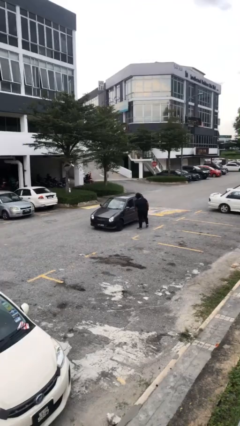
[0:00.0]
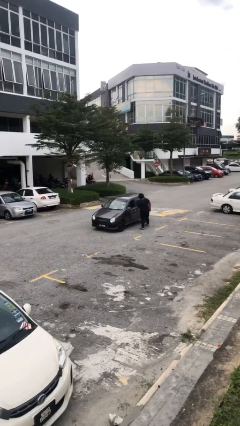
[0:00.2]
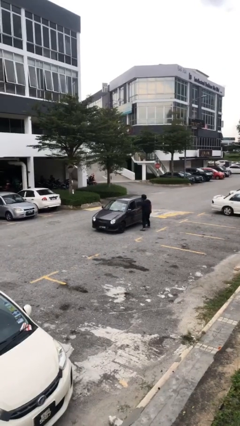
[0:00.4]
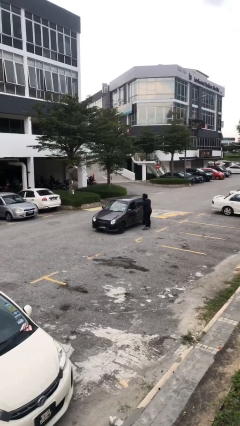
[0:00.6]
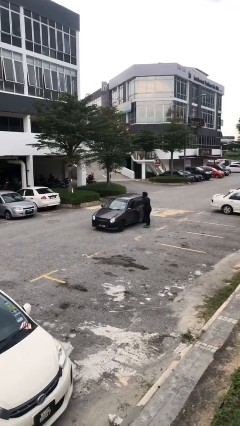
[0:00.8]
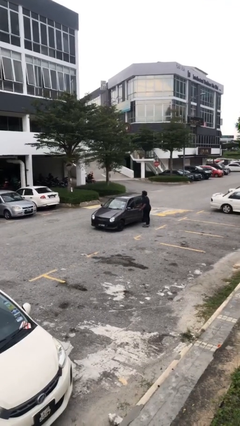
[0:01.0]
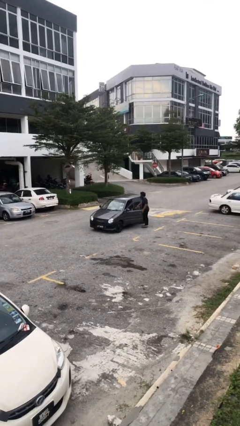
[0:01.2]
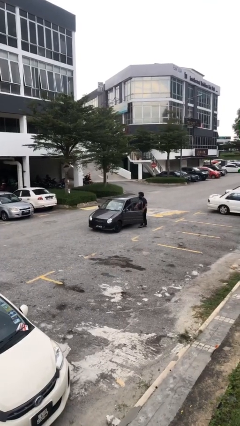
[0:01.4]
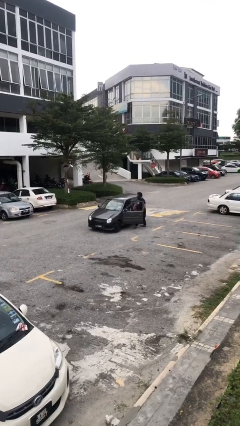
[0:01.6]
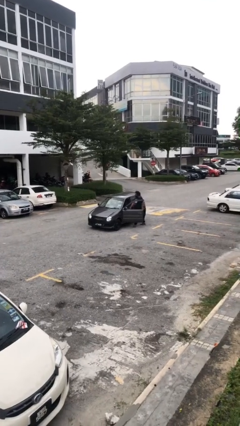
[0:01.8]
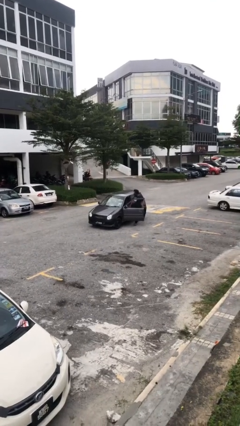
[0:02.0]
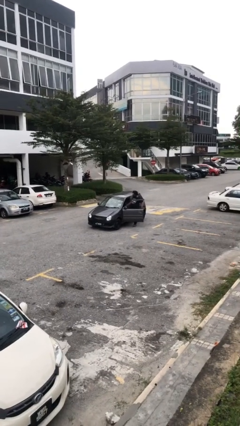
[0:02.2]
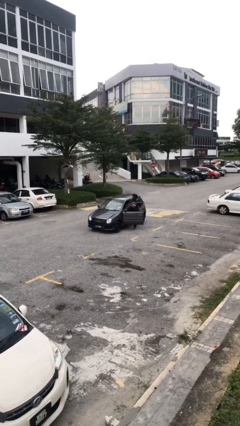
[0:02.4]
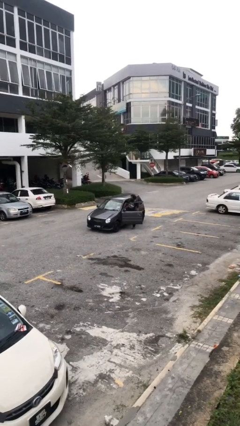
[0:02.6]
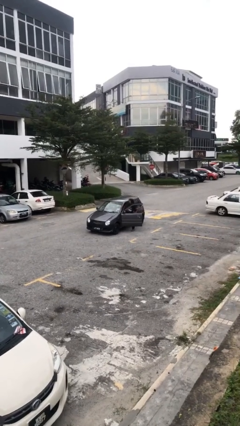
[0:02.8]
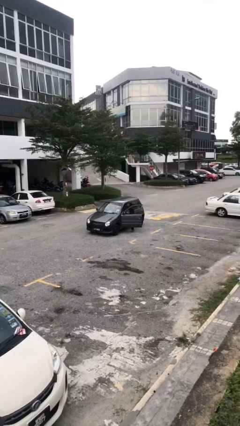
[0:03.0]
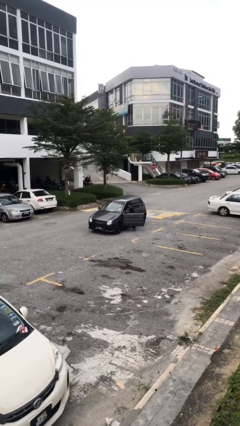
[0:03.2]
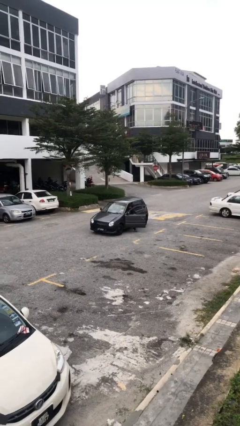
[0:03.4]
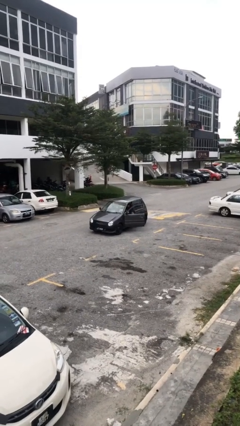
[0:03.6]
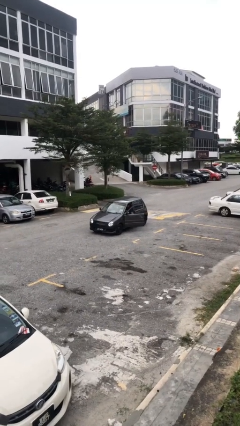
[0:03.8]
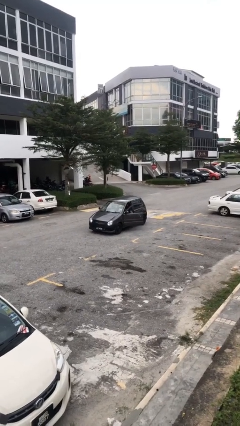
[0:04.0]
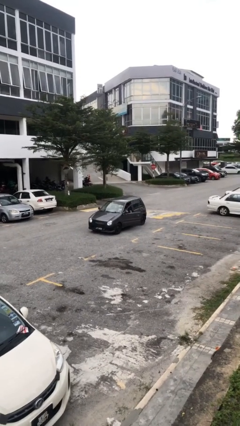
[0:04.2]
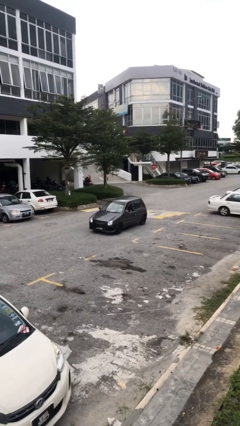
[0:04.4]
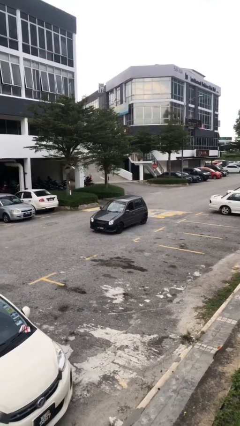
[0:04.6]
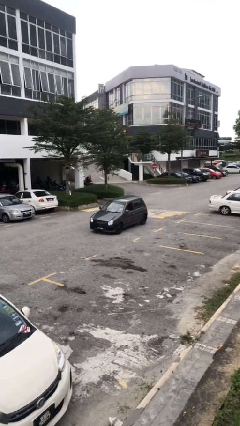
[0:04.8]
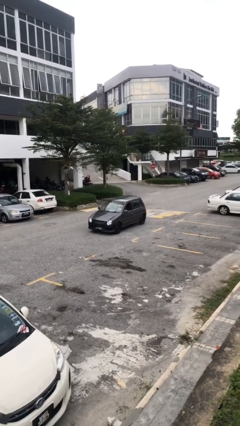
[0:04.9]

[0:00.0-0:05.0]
car picks up person

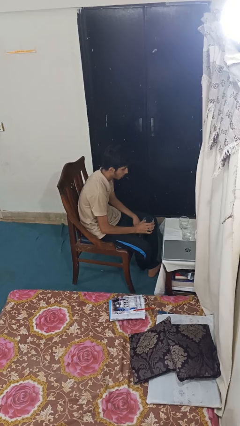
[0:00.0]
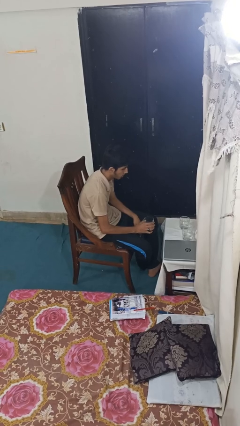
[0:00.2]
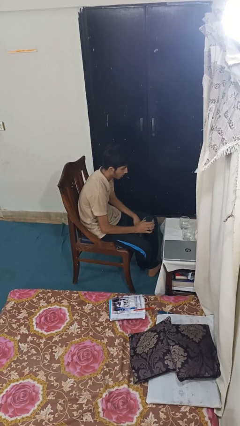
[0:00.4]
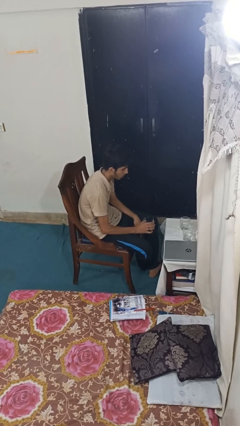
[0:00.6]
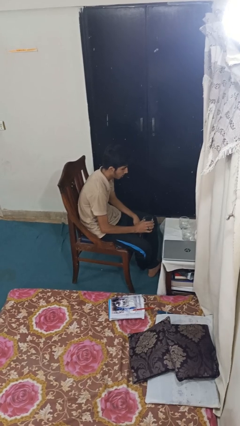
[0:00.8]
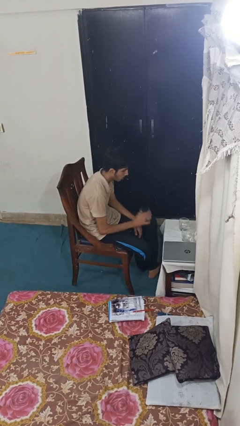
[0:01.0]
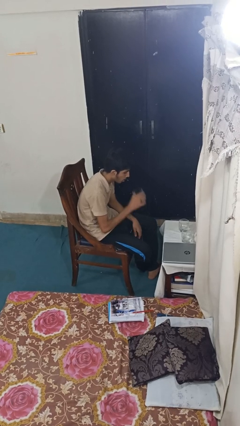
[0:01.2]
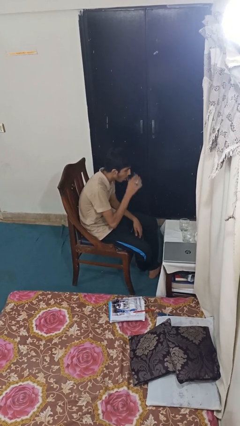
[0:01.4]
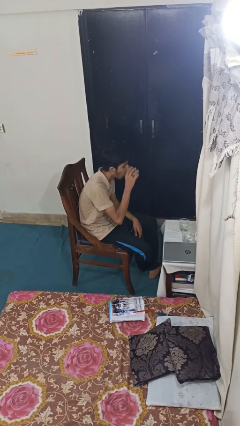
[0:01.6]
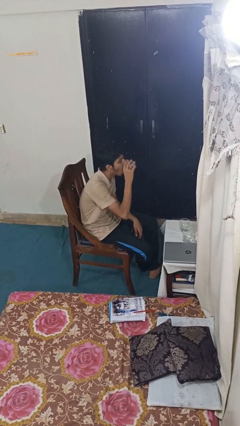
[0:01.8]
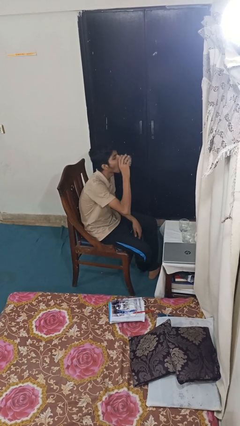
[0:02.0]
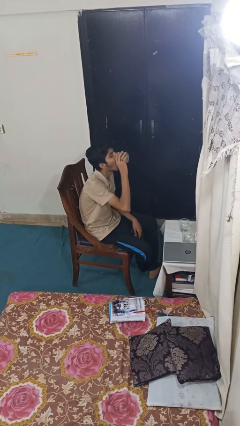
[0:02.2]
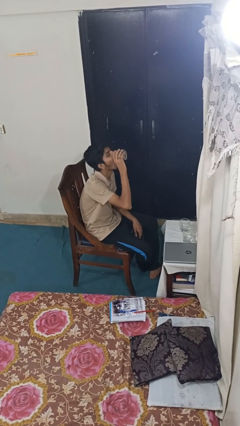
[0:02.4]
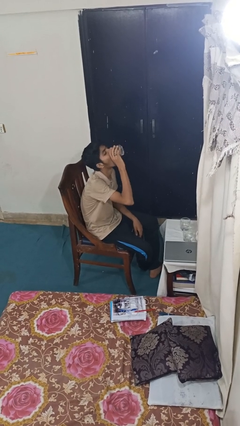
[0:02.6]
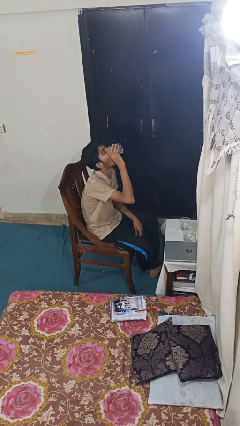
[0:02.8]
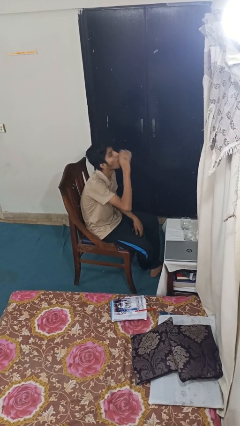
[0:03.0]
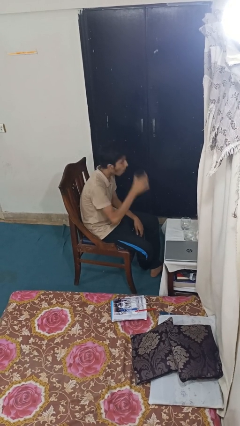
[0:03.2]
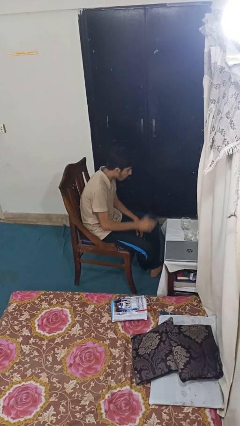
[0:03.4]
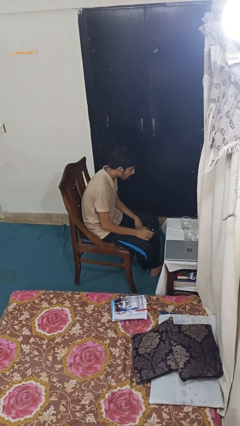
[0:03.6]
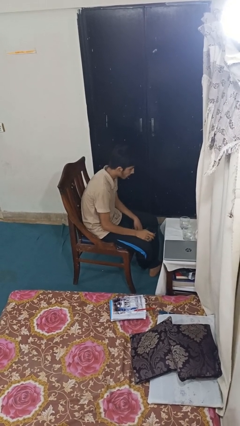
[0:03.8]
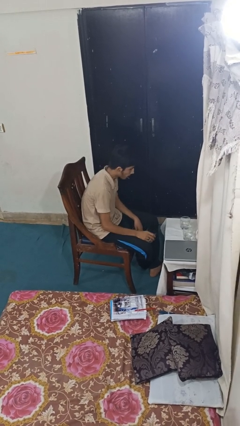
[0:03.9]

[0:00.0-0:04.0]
person drinks from shotglass

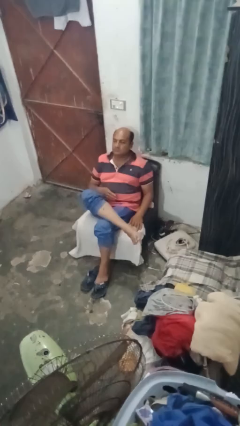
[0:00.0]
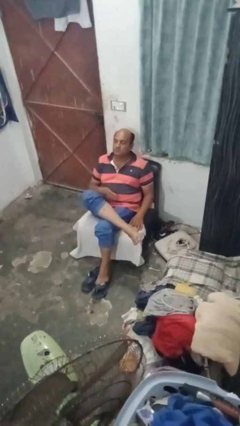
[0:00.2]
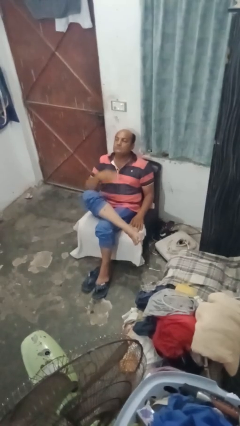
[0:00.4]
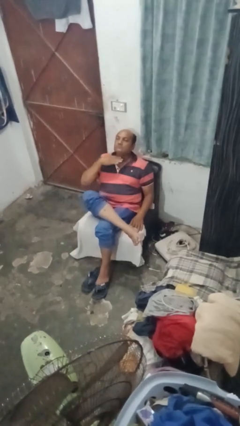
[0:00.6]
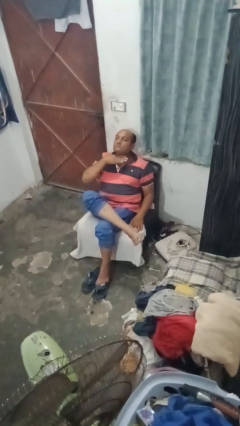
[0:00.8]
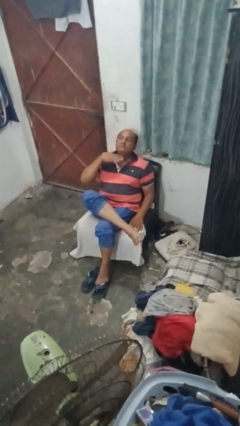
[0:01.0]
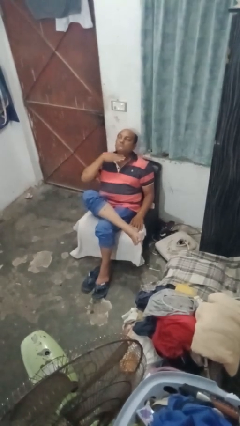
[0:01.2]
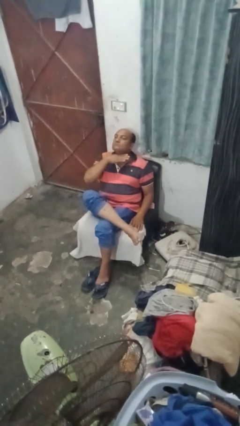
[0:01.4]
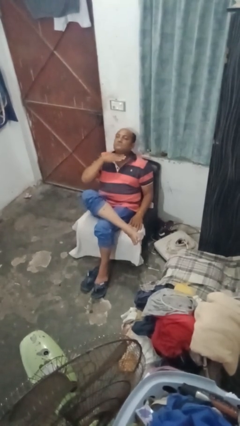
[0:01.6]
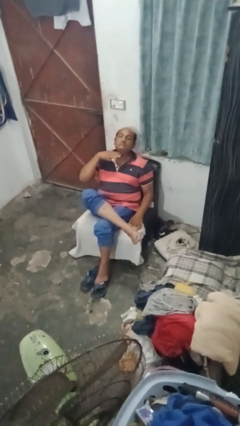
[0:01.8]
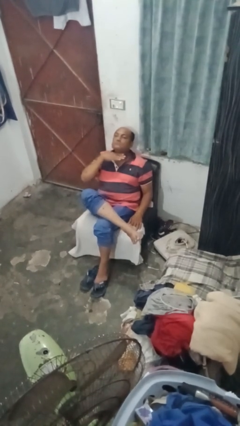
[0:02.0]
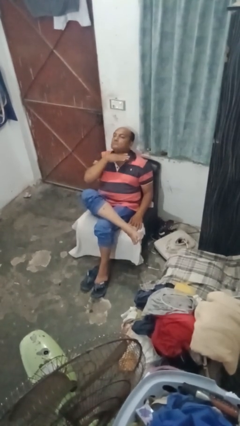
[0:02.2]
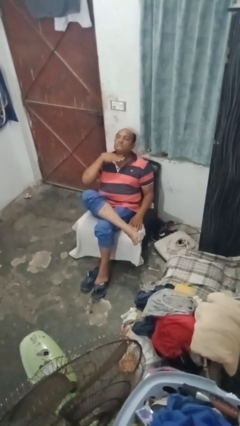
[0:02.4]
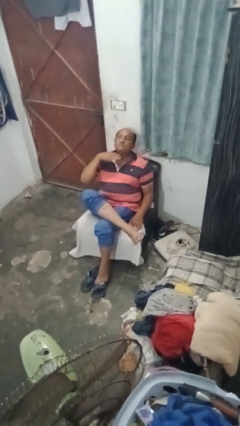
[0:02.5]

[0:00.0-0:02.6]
person gestures cut

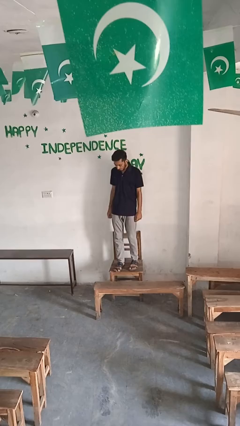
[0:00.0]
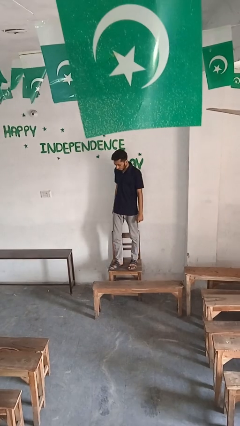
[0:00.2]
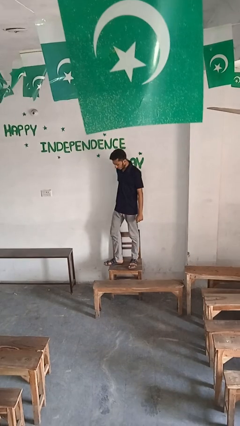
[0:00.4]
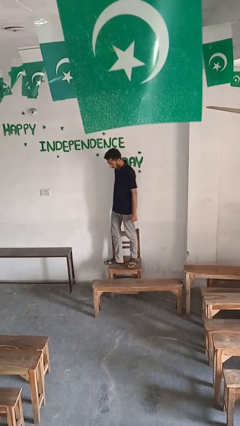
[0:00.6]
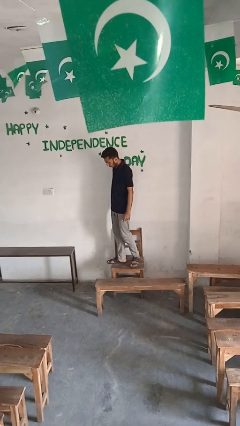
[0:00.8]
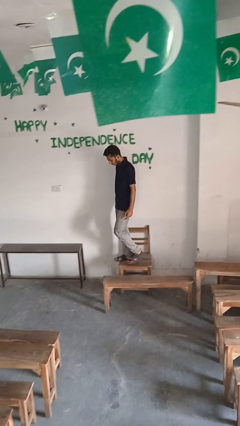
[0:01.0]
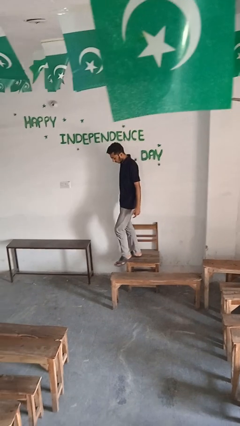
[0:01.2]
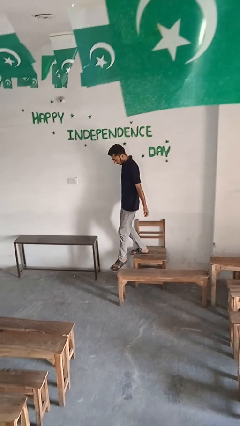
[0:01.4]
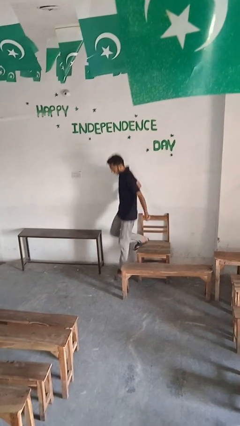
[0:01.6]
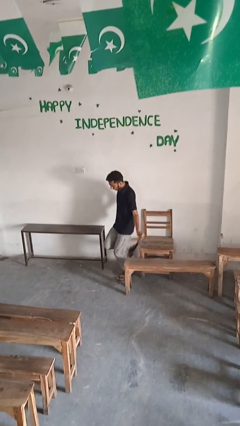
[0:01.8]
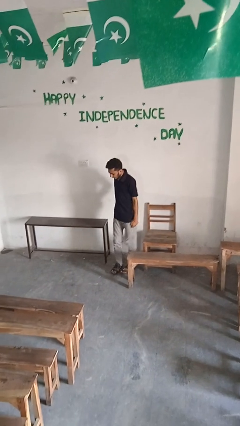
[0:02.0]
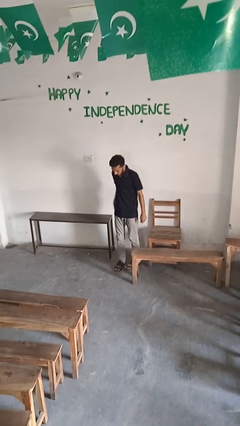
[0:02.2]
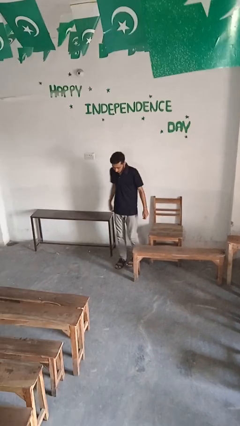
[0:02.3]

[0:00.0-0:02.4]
person climbs off chair

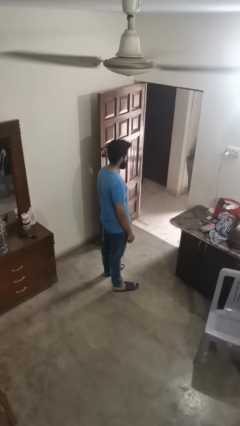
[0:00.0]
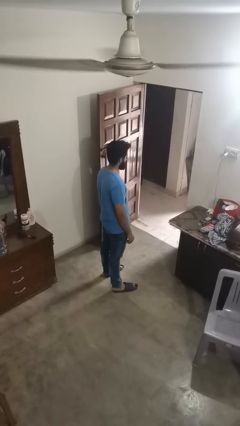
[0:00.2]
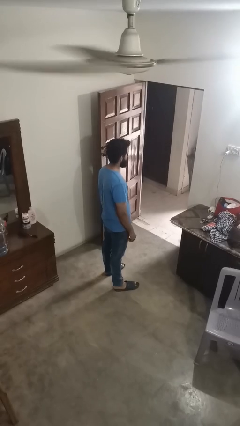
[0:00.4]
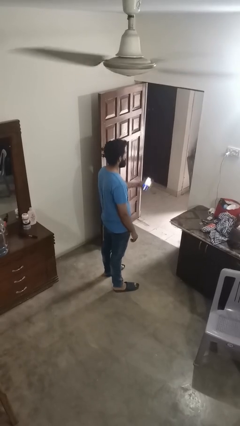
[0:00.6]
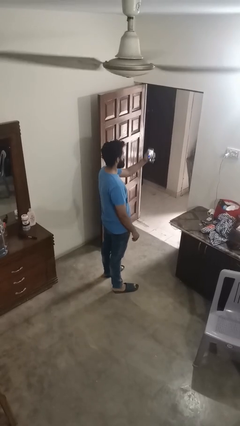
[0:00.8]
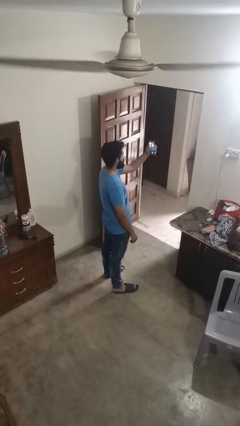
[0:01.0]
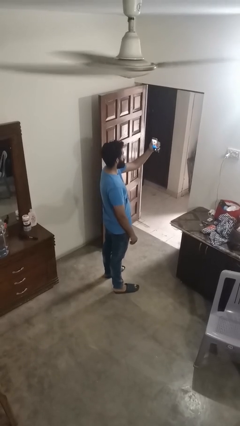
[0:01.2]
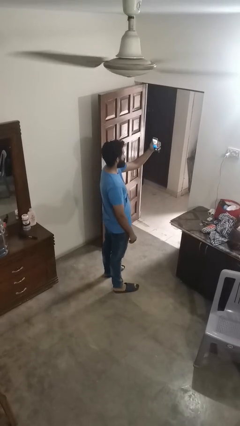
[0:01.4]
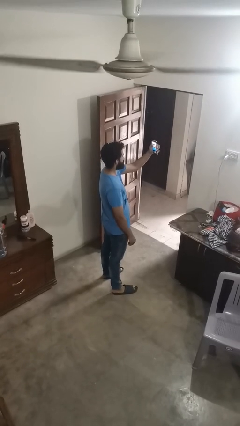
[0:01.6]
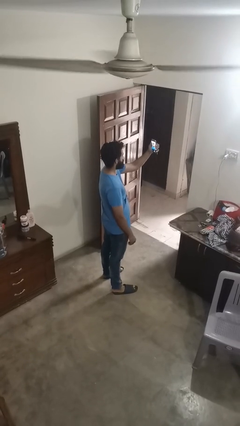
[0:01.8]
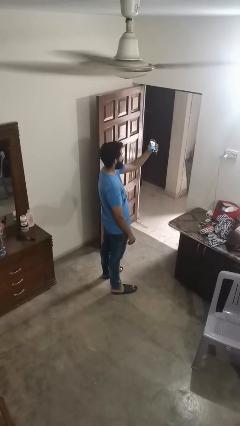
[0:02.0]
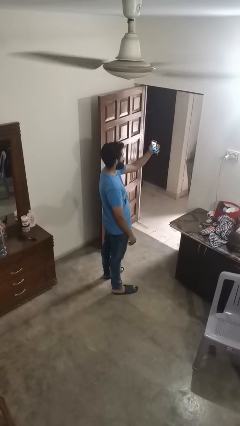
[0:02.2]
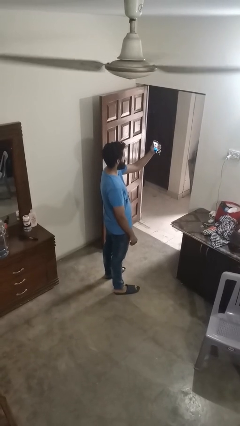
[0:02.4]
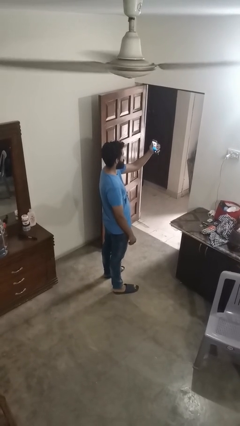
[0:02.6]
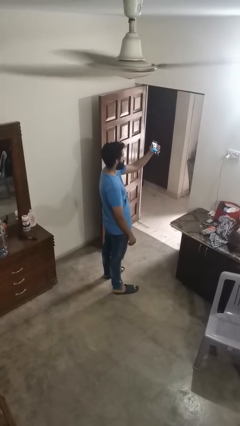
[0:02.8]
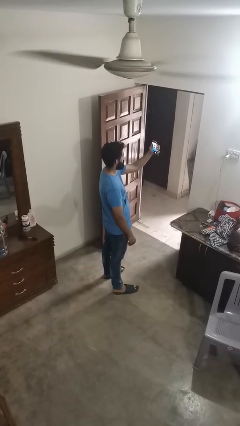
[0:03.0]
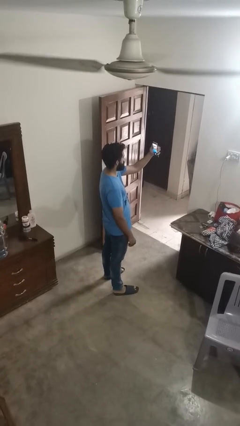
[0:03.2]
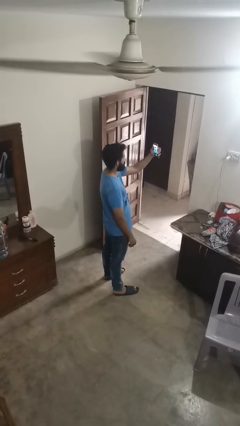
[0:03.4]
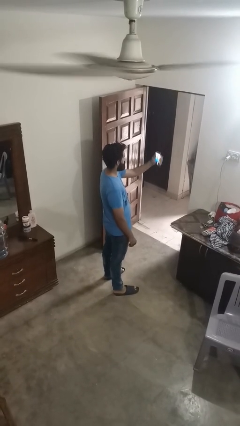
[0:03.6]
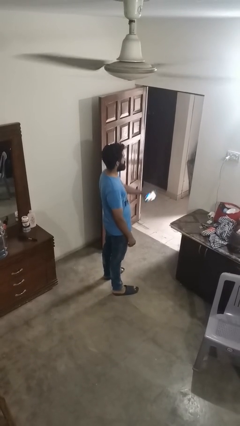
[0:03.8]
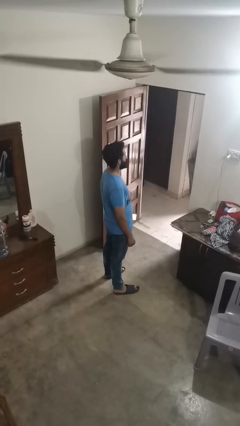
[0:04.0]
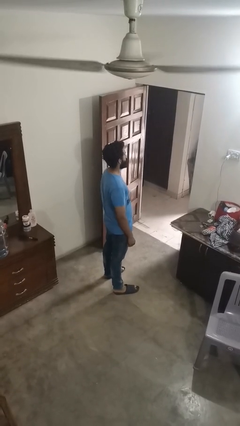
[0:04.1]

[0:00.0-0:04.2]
person takes selfie
